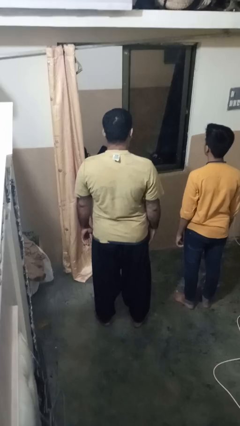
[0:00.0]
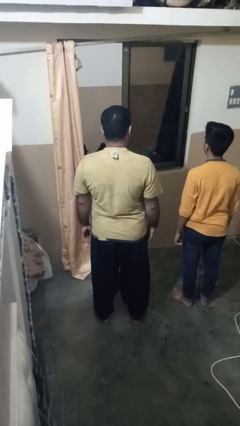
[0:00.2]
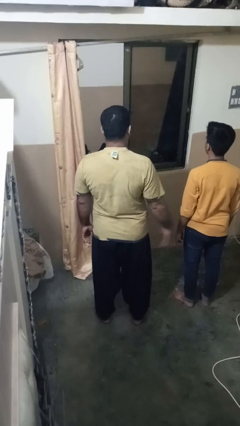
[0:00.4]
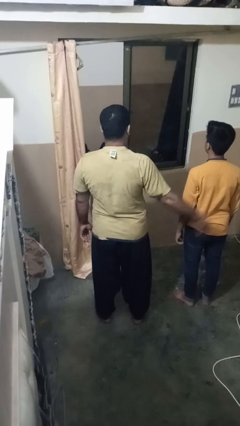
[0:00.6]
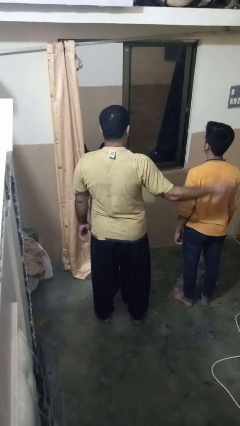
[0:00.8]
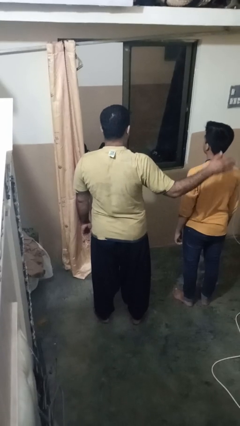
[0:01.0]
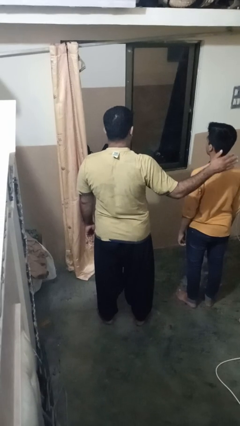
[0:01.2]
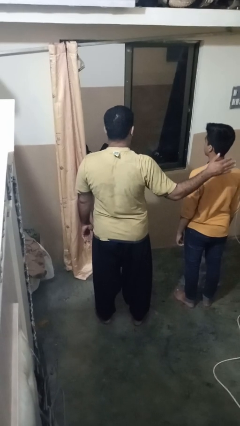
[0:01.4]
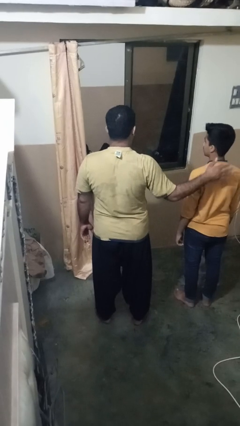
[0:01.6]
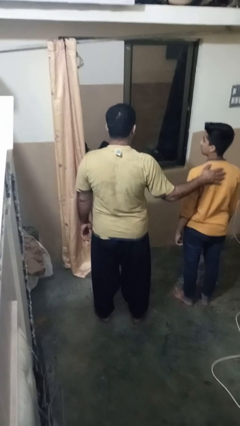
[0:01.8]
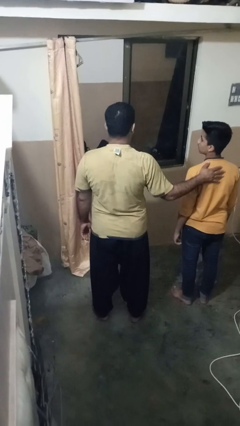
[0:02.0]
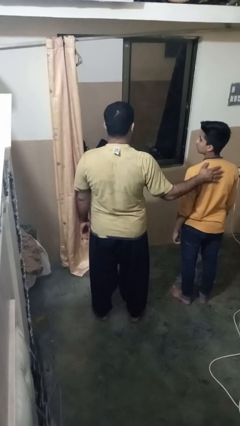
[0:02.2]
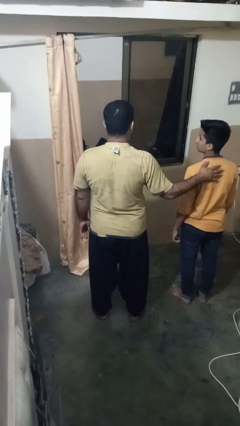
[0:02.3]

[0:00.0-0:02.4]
person touches back of person

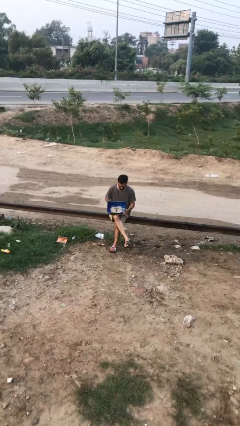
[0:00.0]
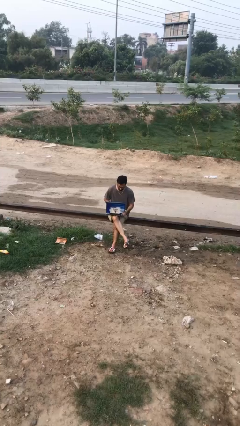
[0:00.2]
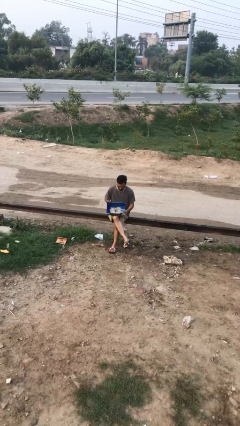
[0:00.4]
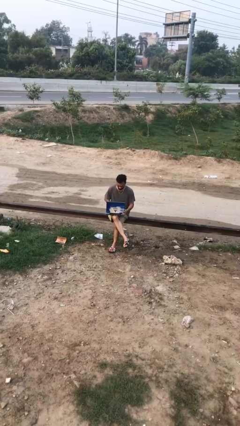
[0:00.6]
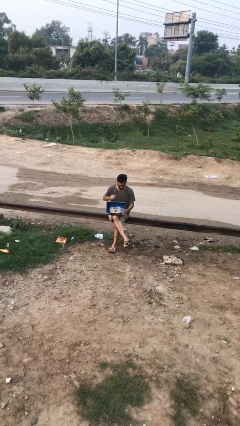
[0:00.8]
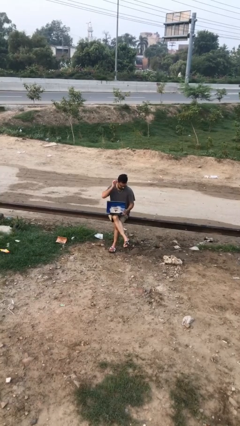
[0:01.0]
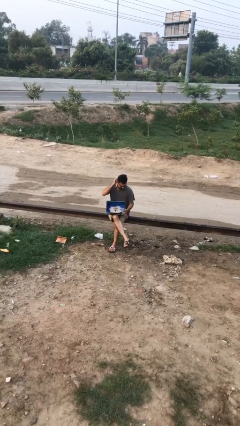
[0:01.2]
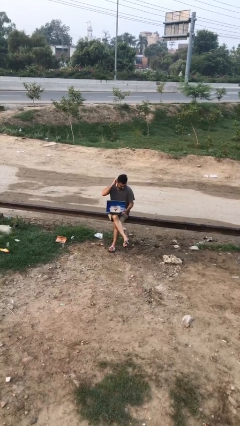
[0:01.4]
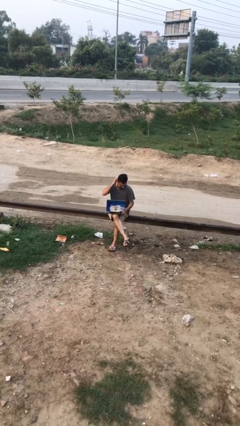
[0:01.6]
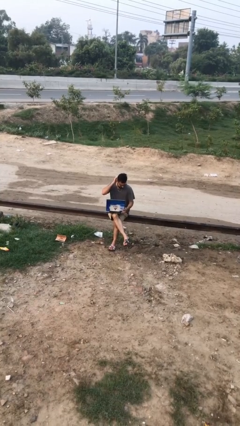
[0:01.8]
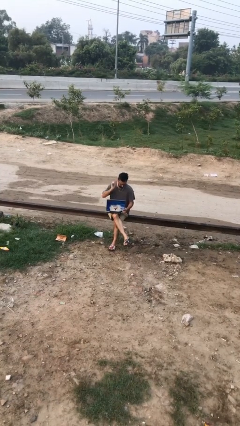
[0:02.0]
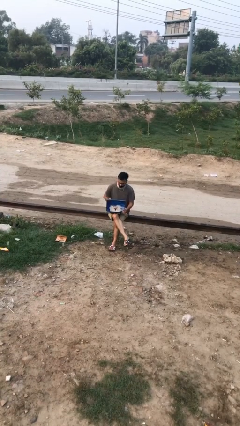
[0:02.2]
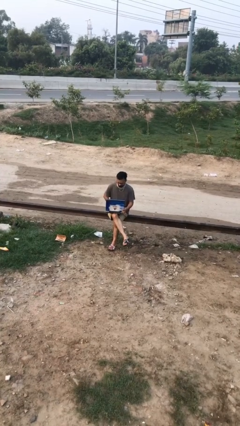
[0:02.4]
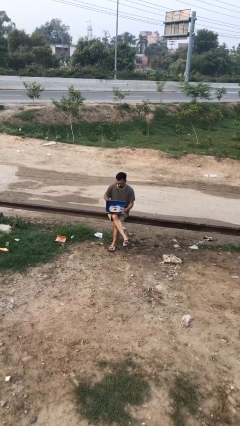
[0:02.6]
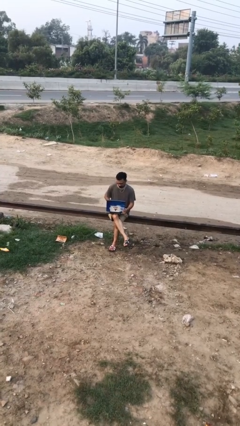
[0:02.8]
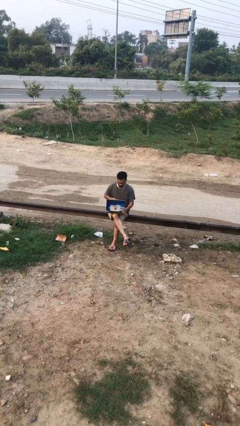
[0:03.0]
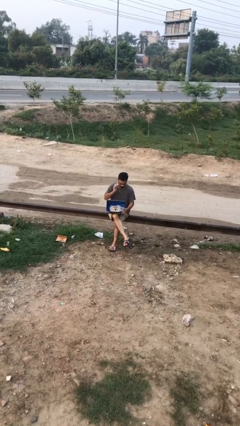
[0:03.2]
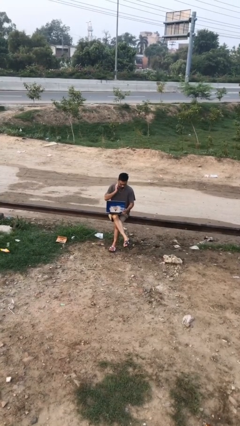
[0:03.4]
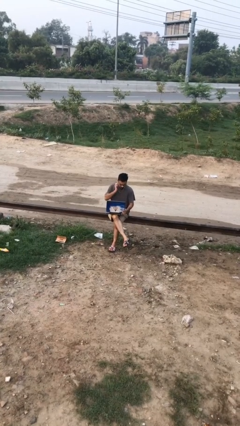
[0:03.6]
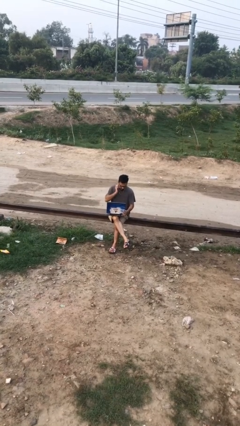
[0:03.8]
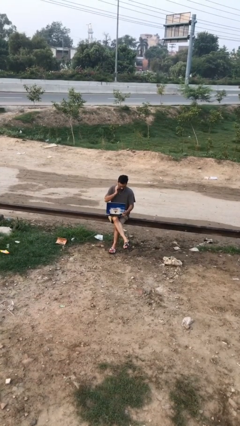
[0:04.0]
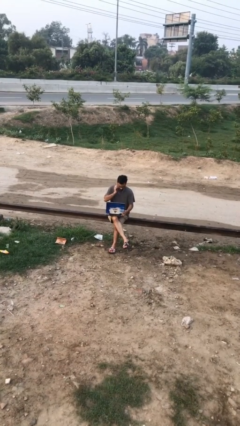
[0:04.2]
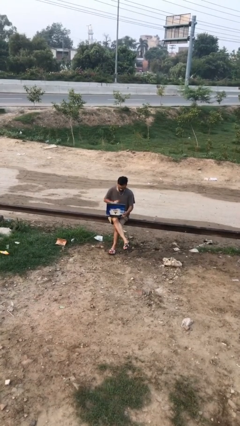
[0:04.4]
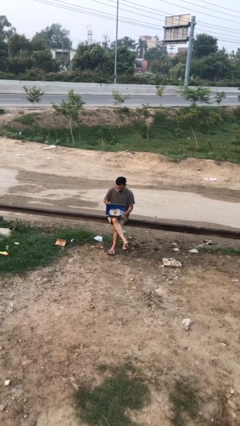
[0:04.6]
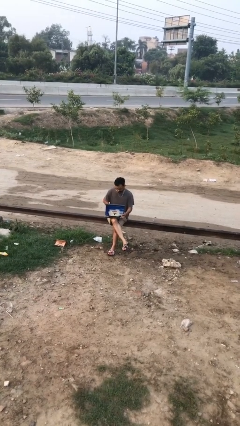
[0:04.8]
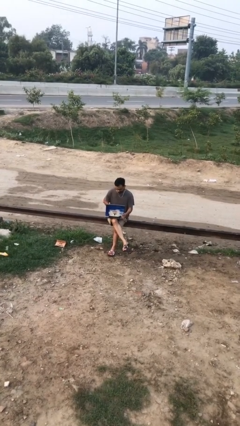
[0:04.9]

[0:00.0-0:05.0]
person interacts with laptop

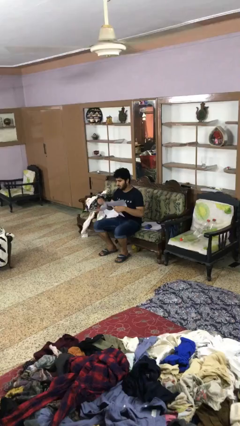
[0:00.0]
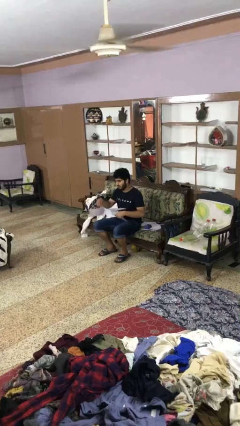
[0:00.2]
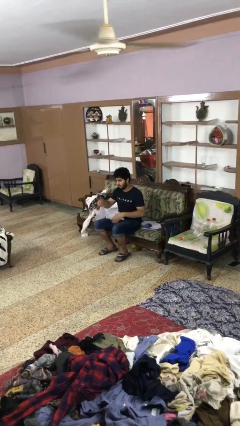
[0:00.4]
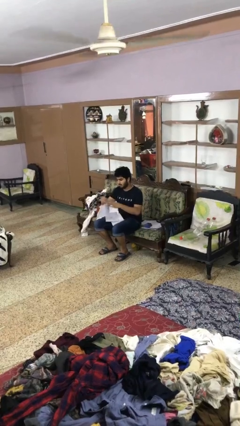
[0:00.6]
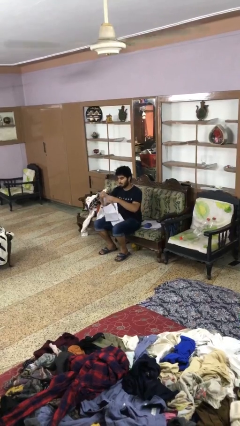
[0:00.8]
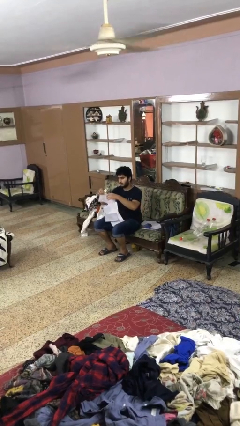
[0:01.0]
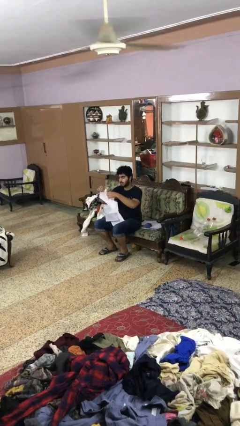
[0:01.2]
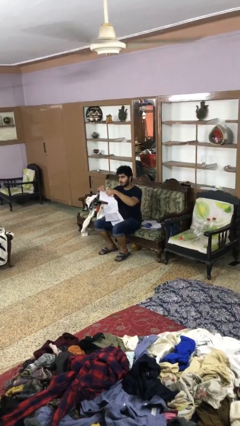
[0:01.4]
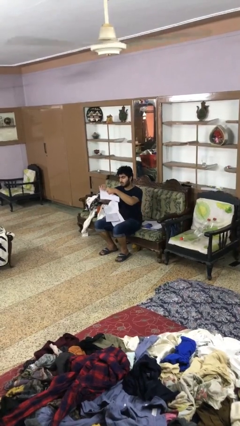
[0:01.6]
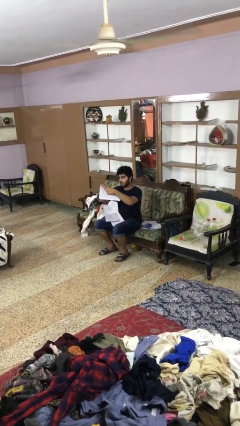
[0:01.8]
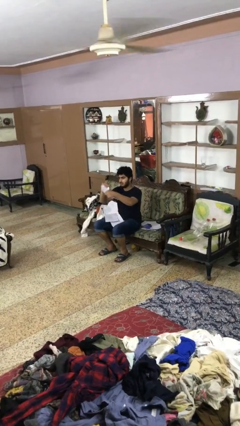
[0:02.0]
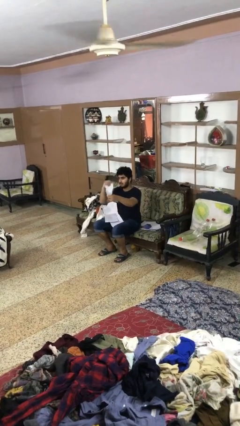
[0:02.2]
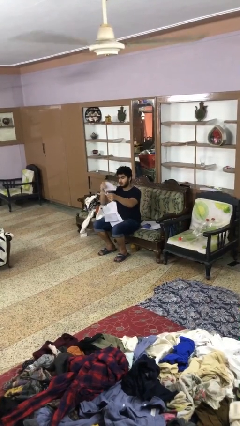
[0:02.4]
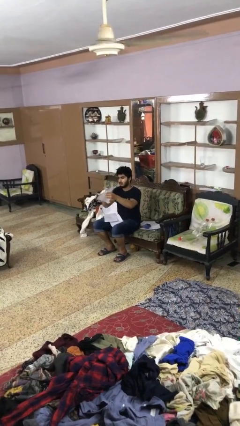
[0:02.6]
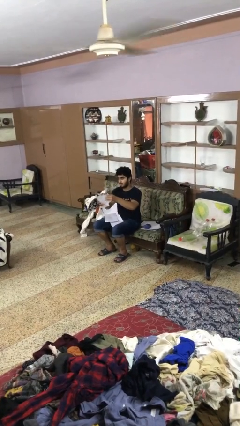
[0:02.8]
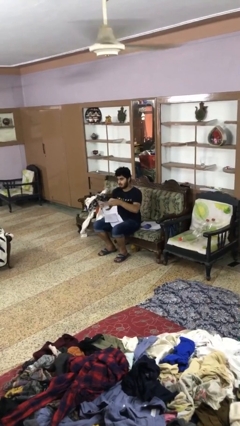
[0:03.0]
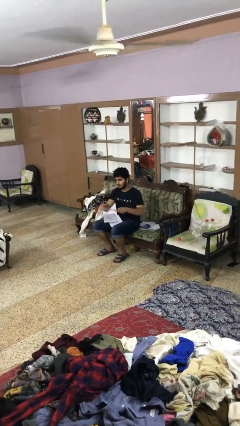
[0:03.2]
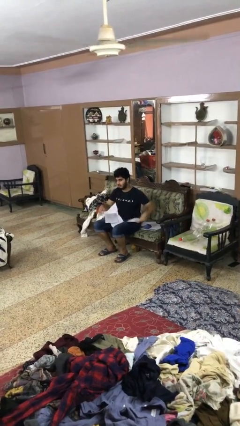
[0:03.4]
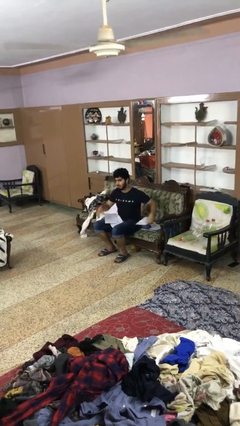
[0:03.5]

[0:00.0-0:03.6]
person tears paper

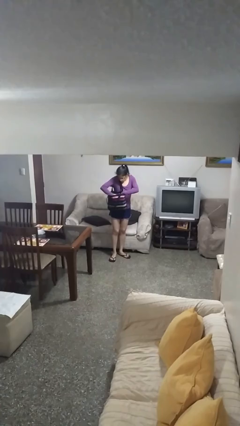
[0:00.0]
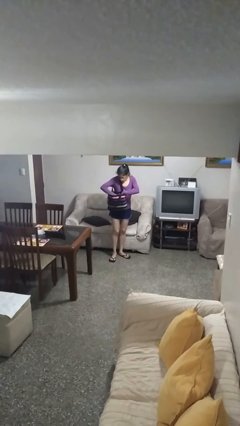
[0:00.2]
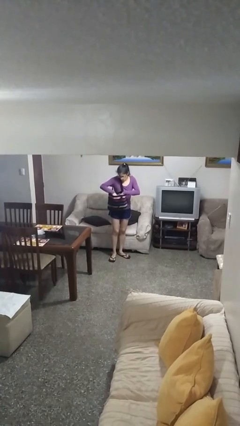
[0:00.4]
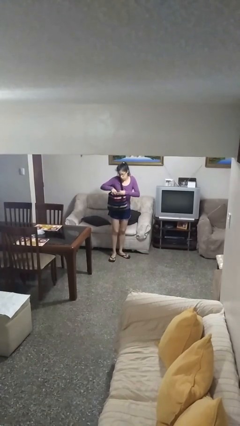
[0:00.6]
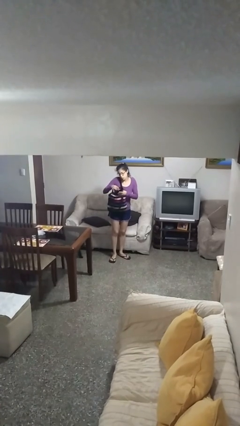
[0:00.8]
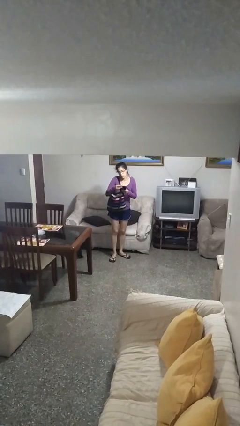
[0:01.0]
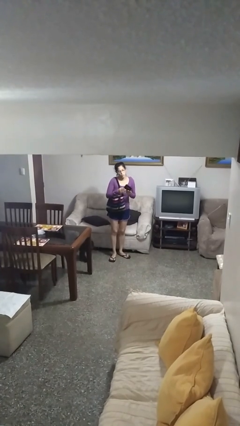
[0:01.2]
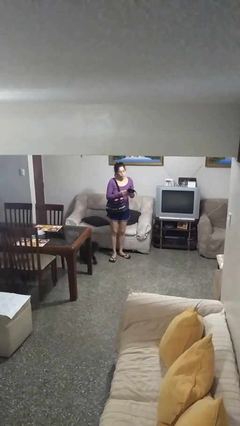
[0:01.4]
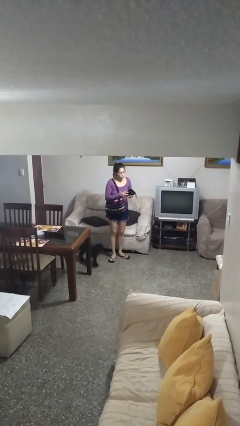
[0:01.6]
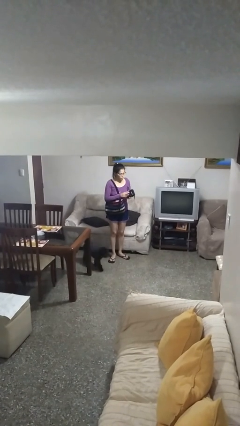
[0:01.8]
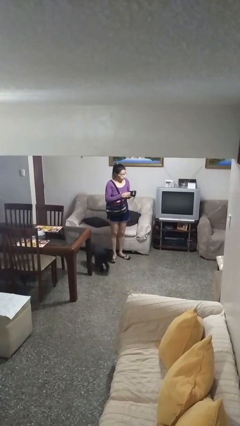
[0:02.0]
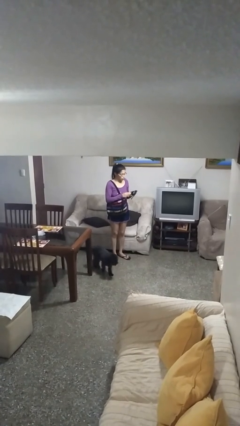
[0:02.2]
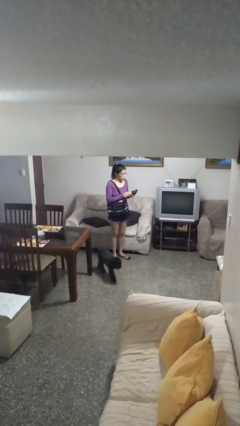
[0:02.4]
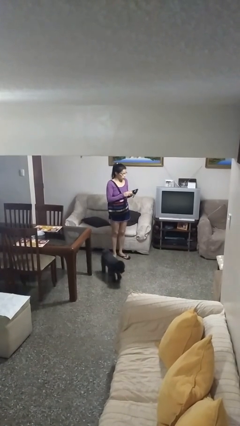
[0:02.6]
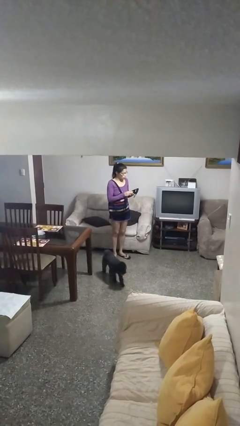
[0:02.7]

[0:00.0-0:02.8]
person takes object from purse

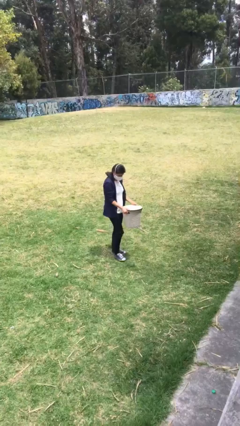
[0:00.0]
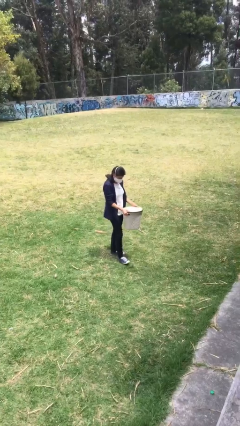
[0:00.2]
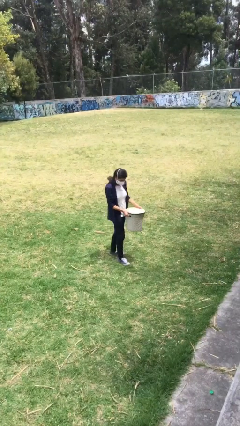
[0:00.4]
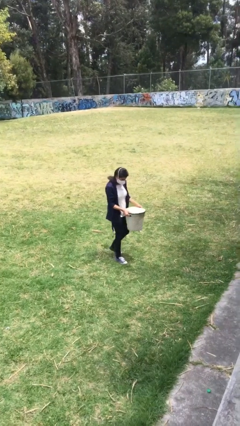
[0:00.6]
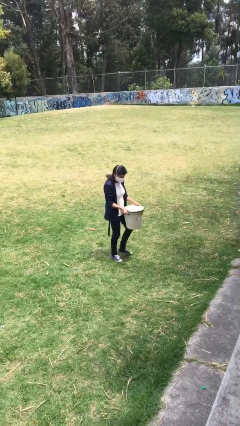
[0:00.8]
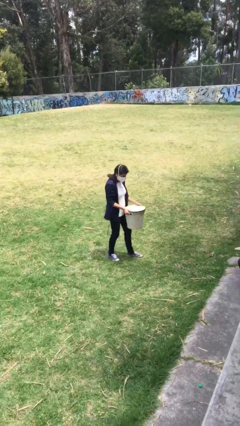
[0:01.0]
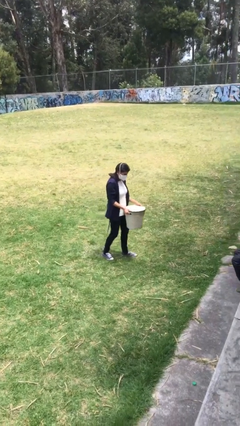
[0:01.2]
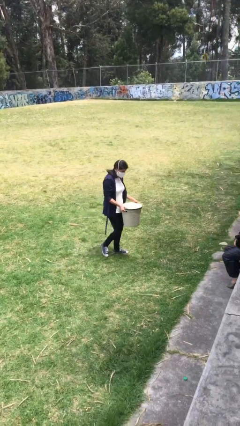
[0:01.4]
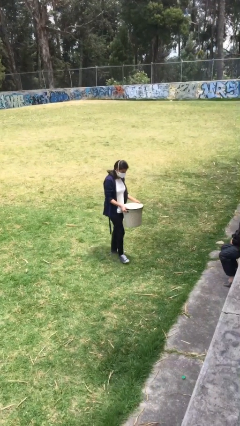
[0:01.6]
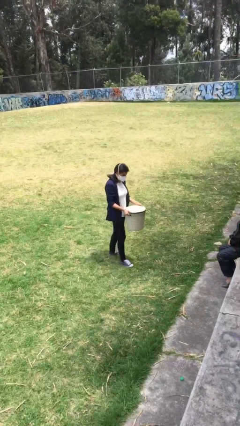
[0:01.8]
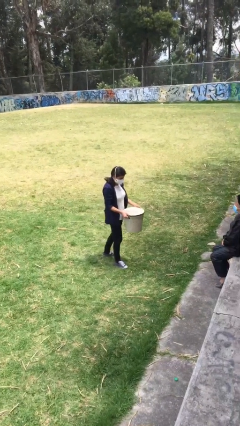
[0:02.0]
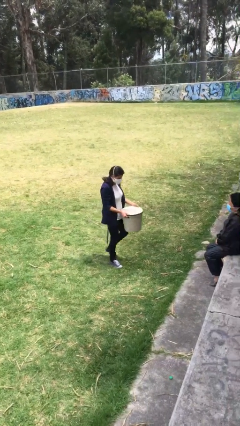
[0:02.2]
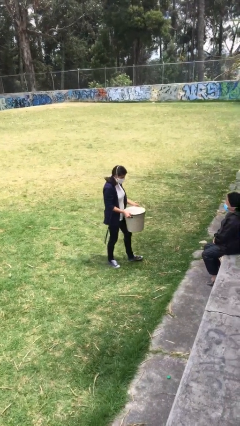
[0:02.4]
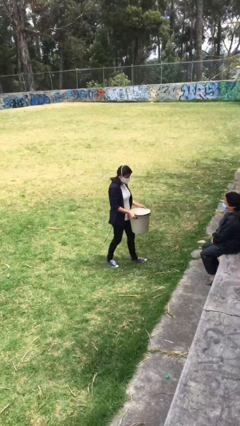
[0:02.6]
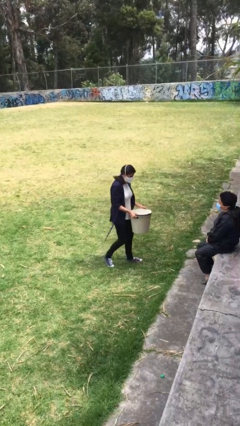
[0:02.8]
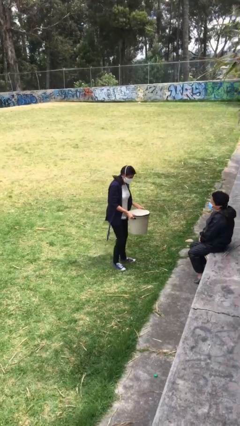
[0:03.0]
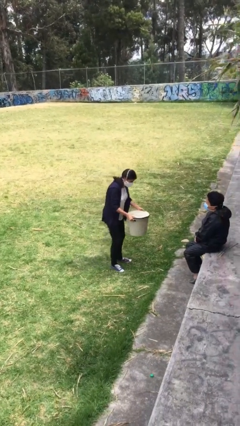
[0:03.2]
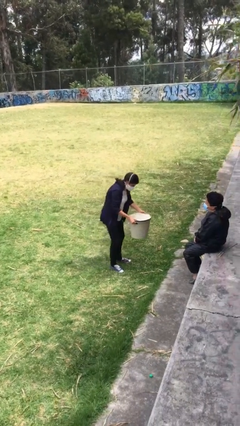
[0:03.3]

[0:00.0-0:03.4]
person carries heavy object

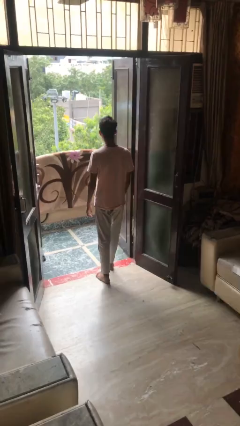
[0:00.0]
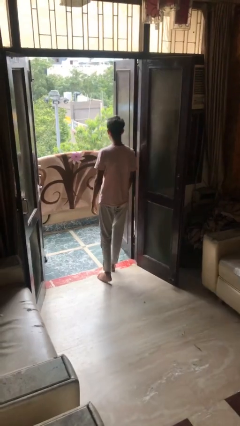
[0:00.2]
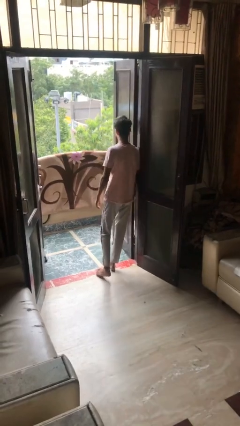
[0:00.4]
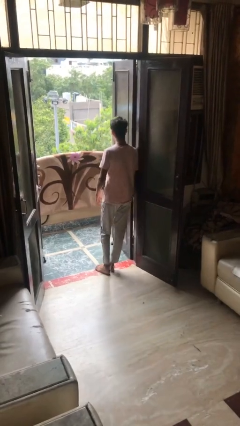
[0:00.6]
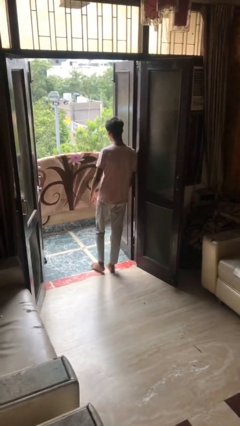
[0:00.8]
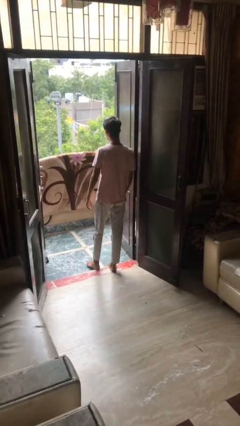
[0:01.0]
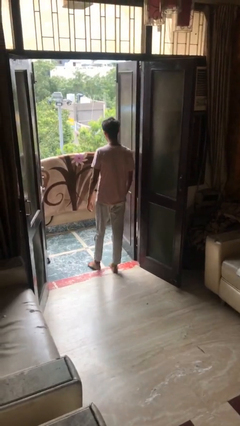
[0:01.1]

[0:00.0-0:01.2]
person bumps into wall
